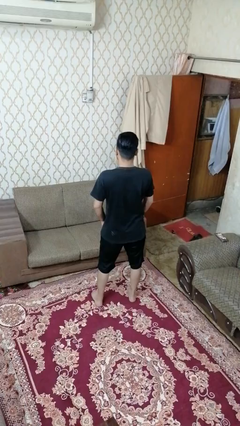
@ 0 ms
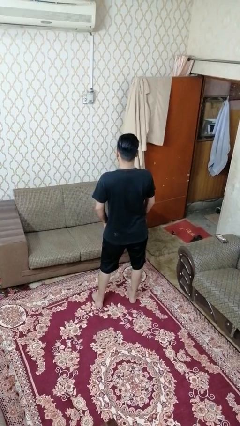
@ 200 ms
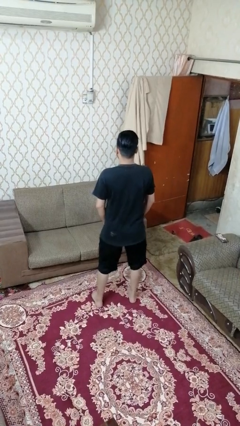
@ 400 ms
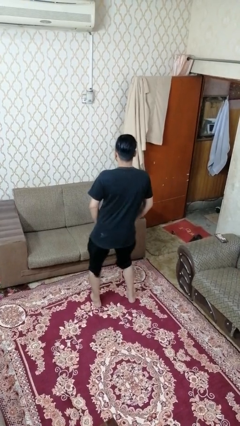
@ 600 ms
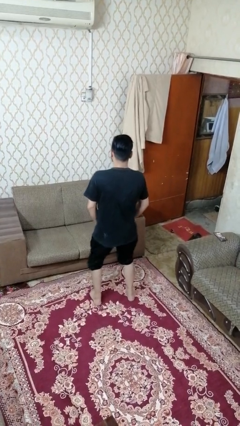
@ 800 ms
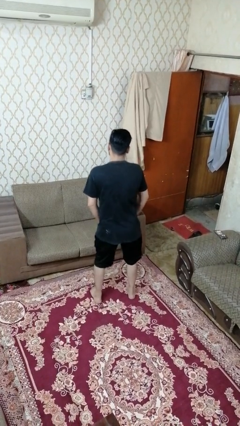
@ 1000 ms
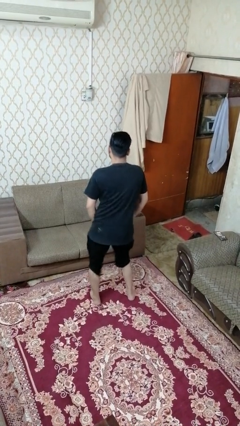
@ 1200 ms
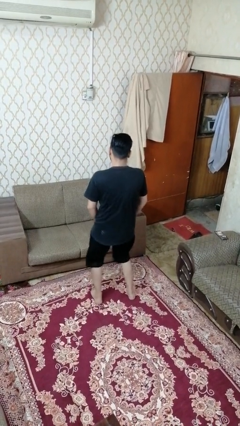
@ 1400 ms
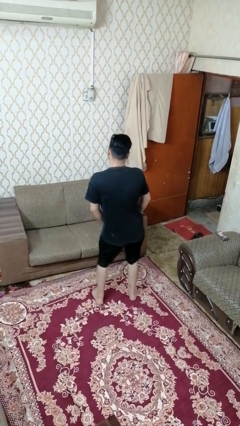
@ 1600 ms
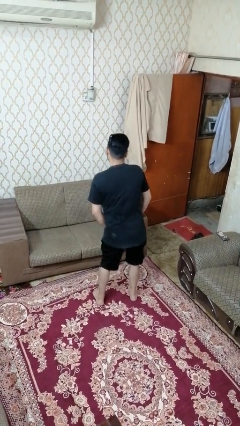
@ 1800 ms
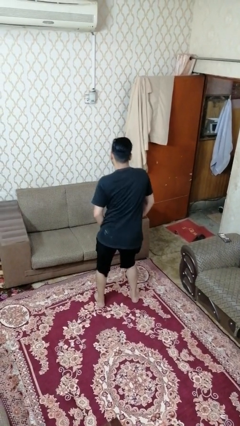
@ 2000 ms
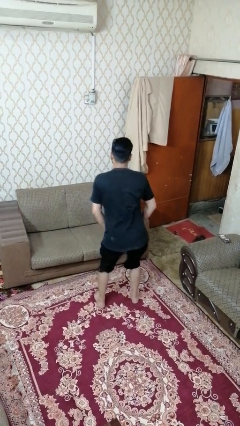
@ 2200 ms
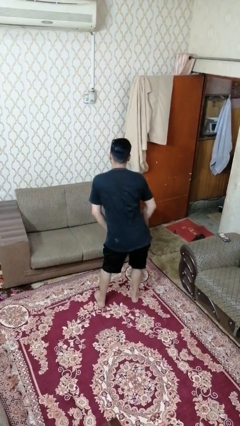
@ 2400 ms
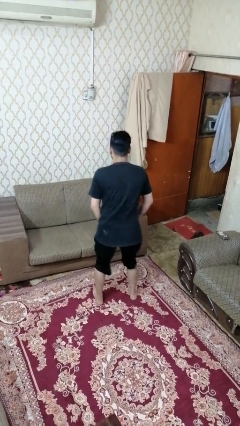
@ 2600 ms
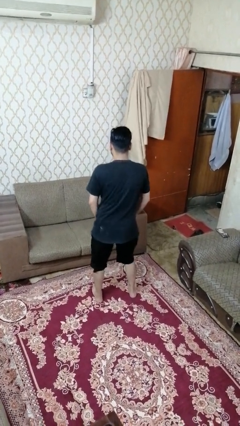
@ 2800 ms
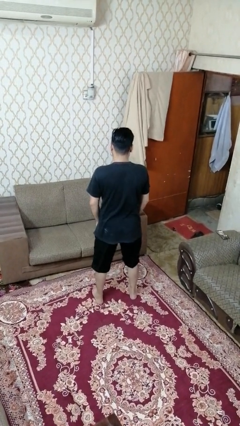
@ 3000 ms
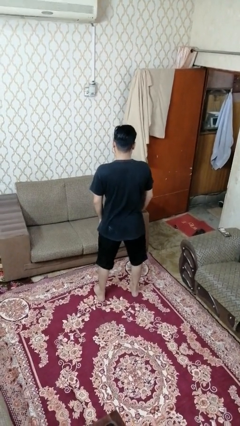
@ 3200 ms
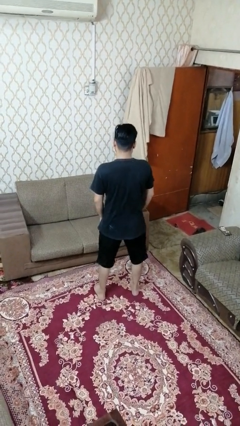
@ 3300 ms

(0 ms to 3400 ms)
person wiggles hips

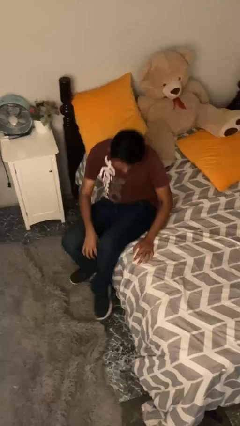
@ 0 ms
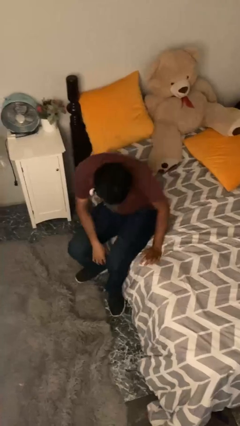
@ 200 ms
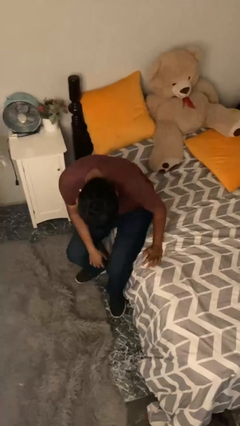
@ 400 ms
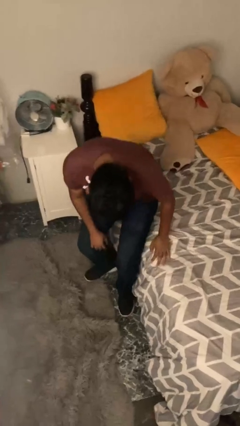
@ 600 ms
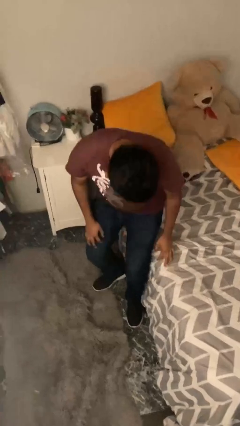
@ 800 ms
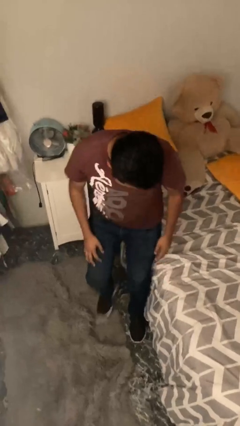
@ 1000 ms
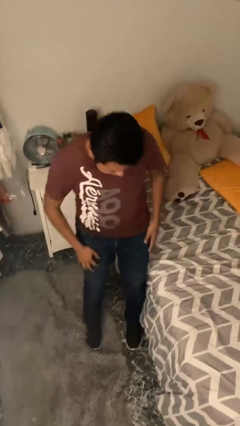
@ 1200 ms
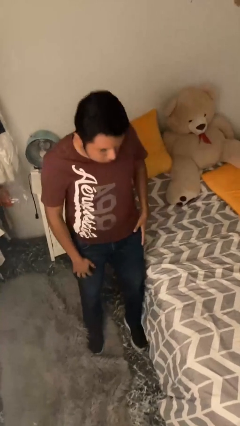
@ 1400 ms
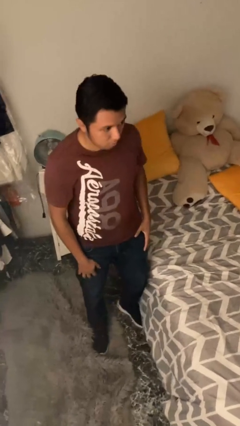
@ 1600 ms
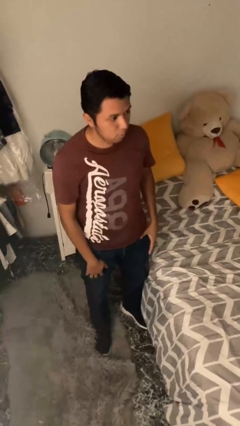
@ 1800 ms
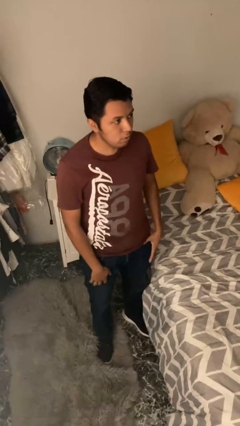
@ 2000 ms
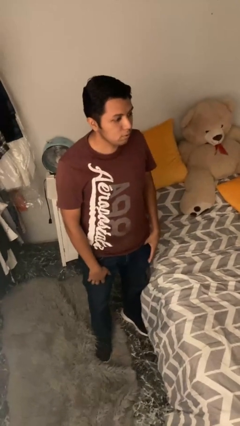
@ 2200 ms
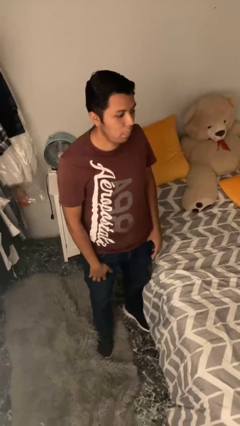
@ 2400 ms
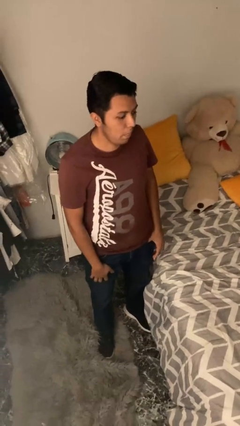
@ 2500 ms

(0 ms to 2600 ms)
person stands up

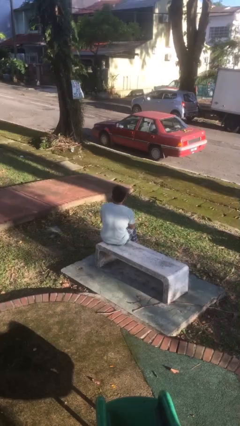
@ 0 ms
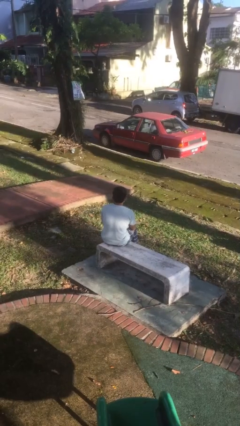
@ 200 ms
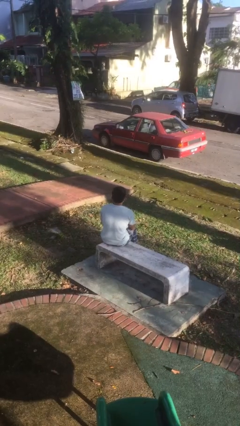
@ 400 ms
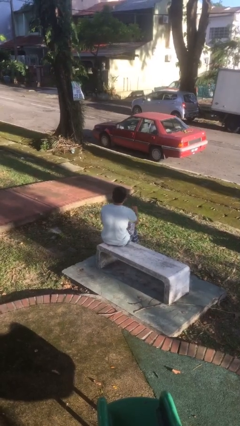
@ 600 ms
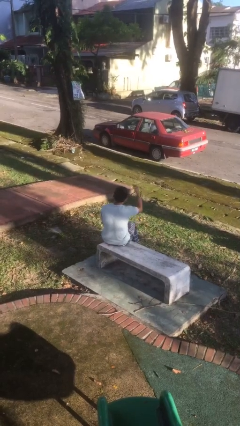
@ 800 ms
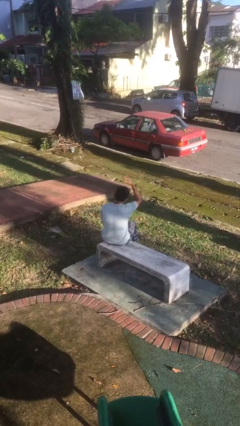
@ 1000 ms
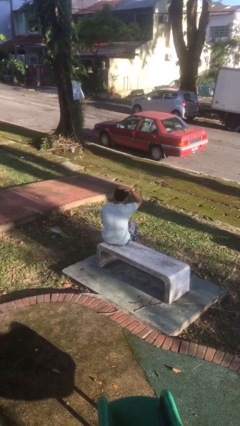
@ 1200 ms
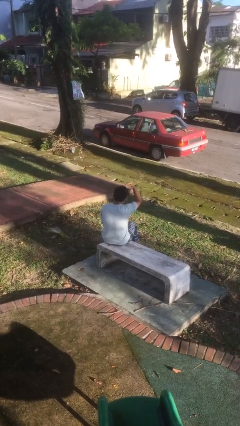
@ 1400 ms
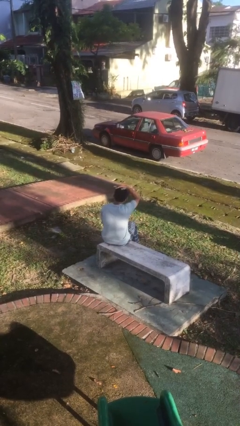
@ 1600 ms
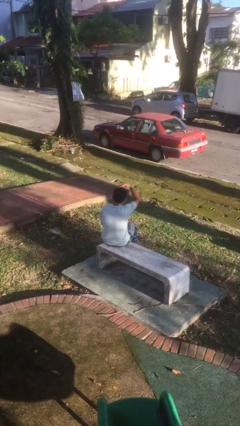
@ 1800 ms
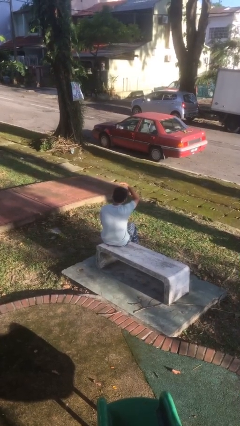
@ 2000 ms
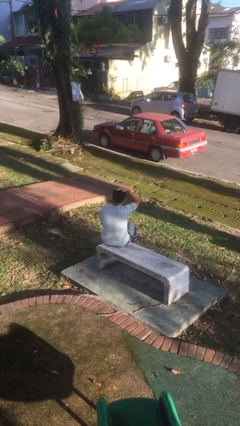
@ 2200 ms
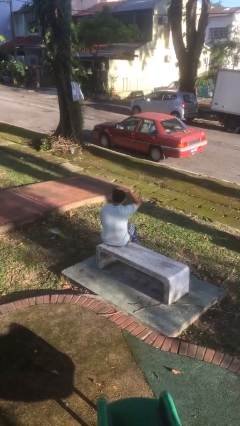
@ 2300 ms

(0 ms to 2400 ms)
person pats head

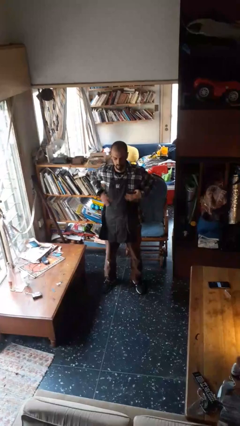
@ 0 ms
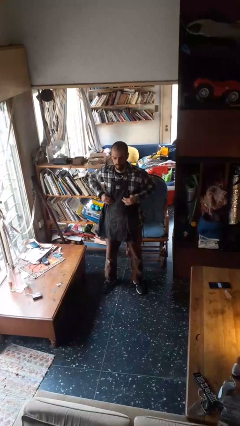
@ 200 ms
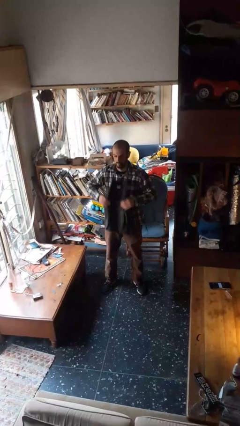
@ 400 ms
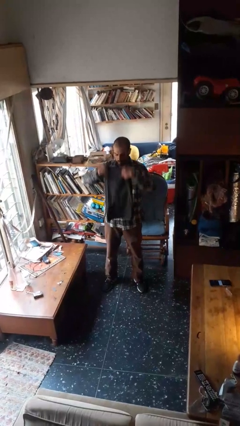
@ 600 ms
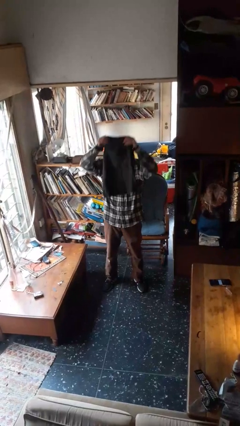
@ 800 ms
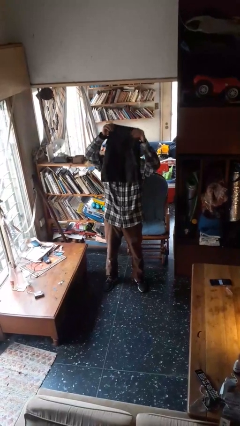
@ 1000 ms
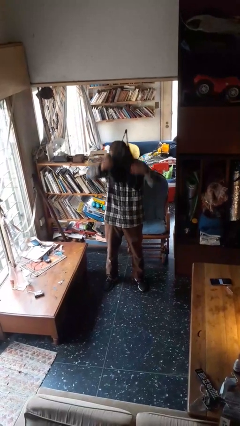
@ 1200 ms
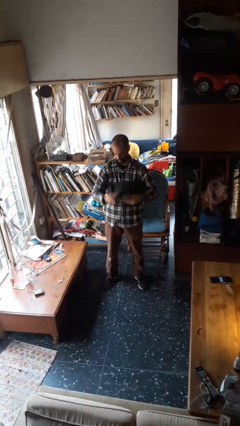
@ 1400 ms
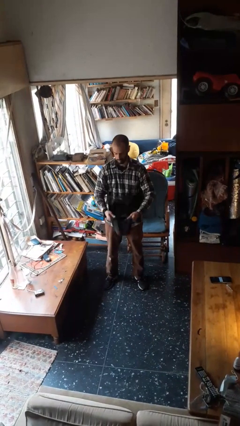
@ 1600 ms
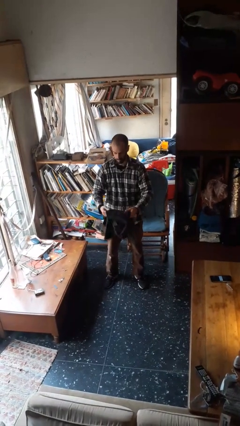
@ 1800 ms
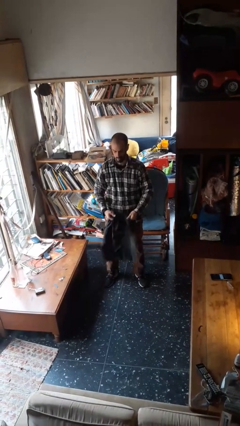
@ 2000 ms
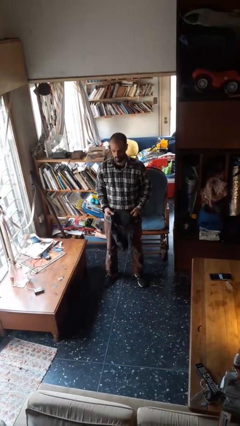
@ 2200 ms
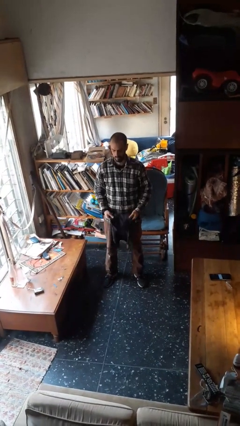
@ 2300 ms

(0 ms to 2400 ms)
person takes off apron

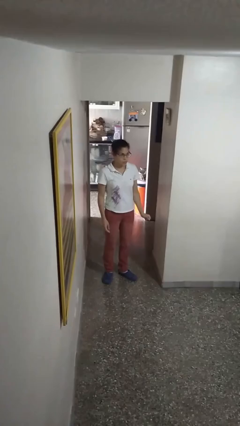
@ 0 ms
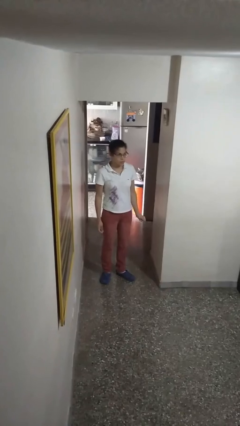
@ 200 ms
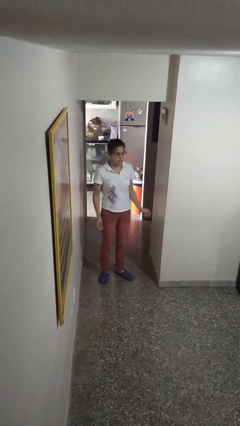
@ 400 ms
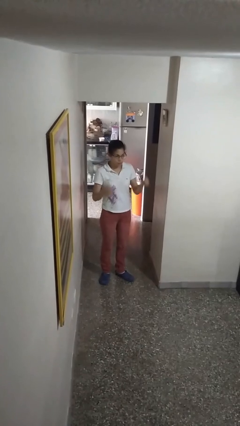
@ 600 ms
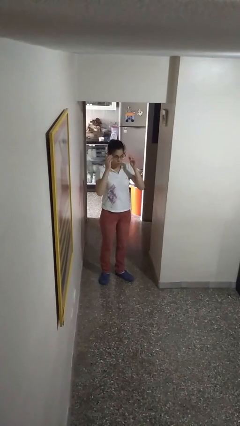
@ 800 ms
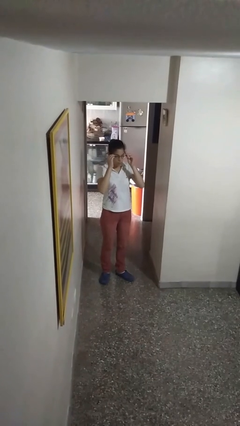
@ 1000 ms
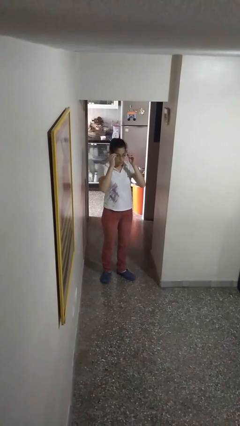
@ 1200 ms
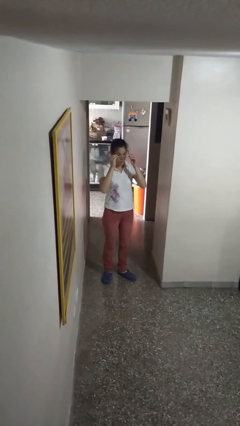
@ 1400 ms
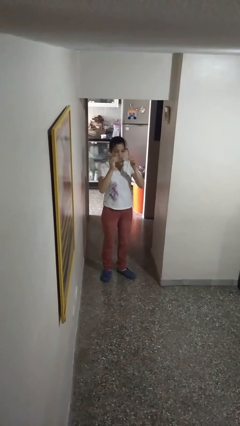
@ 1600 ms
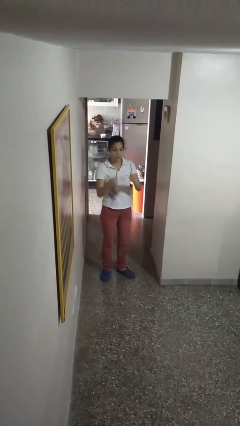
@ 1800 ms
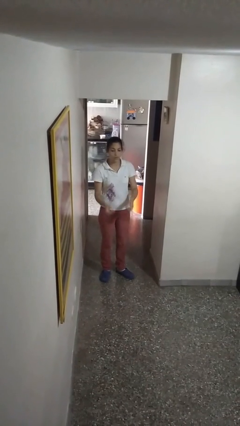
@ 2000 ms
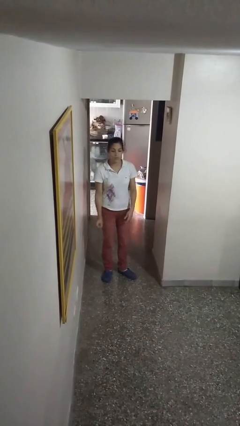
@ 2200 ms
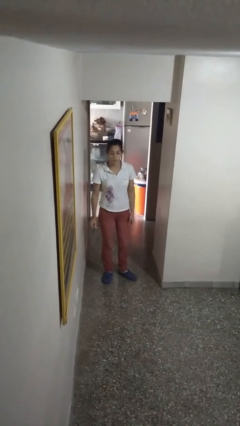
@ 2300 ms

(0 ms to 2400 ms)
person takes off glasses

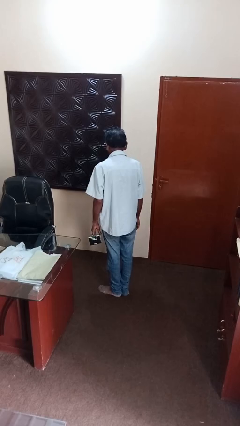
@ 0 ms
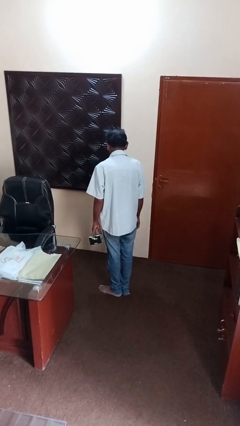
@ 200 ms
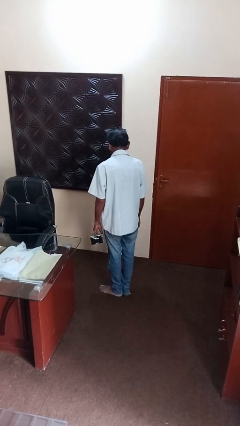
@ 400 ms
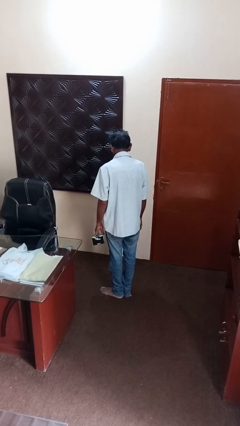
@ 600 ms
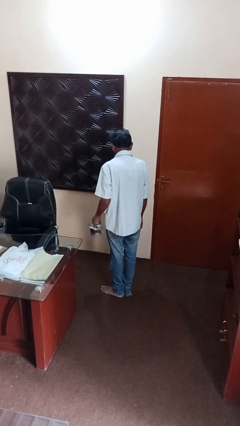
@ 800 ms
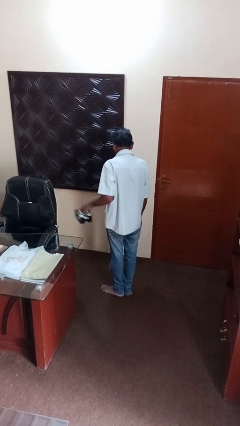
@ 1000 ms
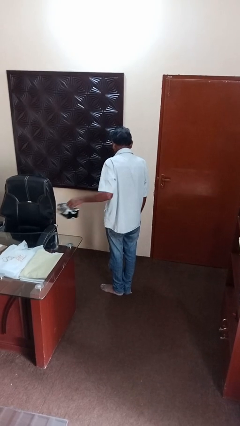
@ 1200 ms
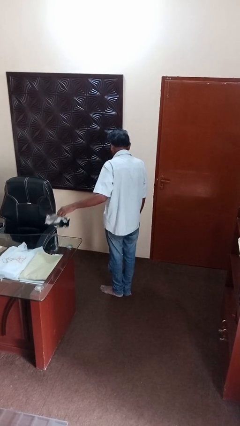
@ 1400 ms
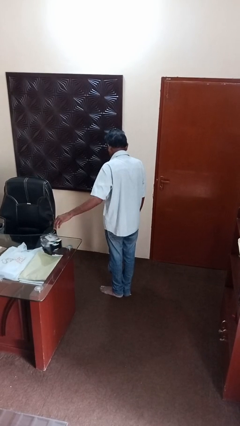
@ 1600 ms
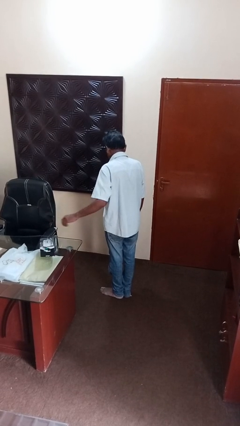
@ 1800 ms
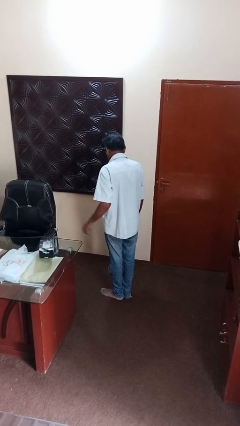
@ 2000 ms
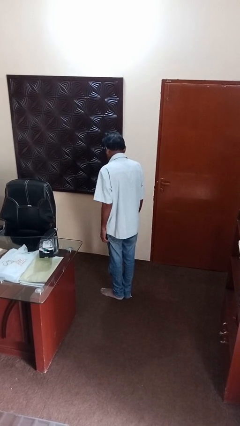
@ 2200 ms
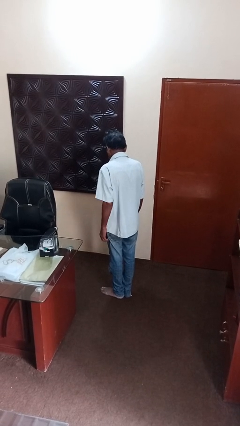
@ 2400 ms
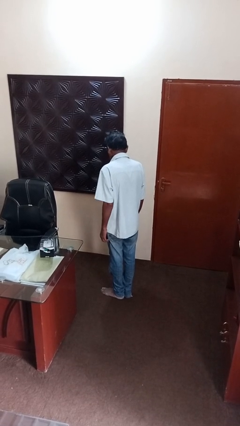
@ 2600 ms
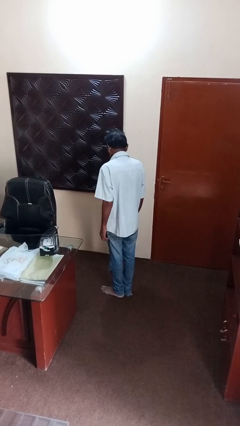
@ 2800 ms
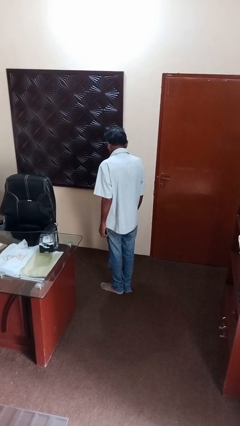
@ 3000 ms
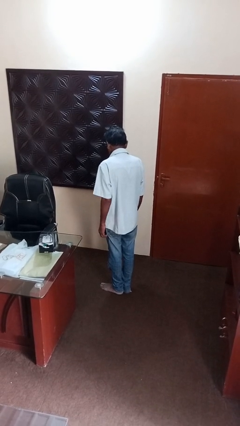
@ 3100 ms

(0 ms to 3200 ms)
person throws object on table

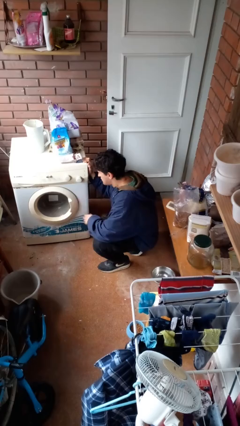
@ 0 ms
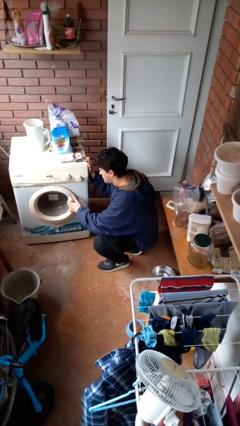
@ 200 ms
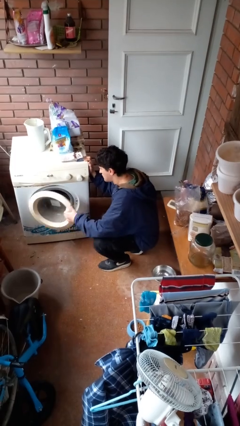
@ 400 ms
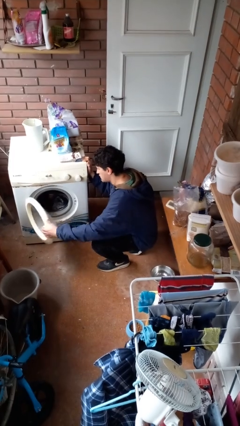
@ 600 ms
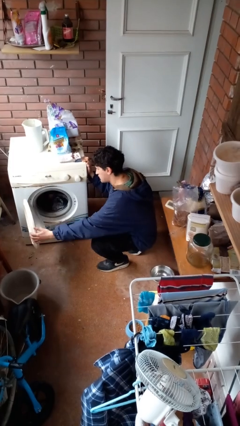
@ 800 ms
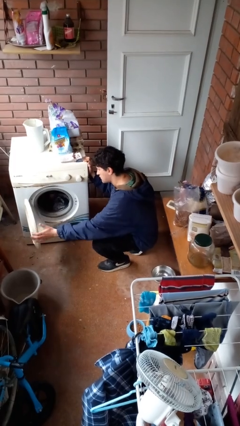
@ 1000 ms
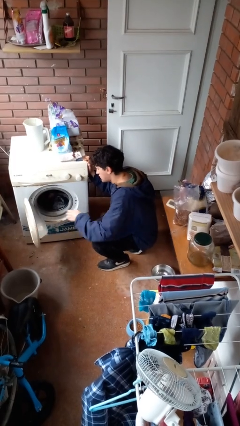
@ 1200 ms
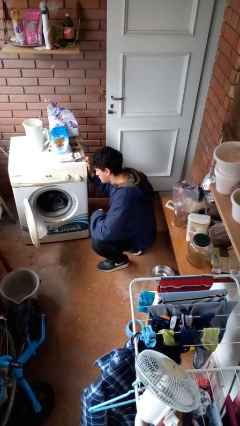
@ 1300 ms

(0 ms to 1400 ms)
person opens clothes washer
